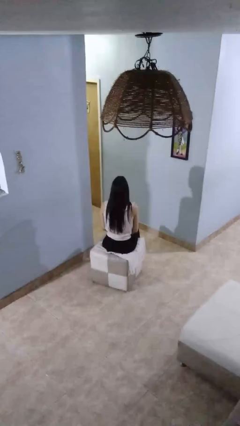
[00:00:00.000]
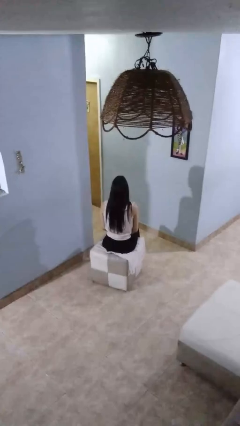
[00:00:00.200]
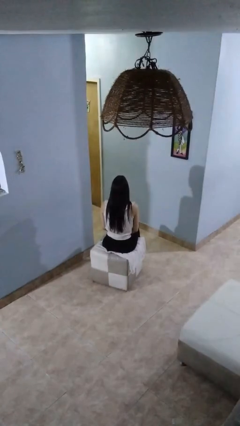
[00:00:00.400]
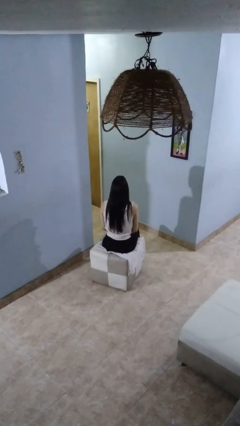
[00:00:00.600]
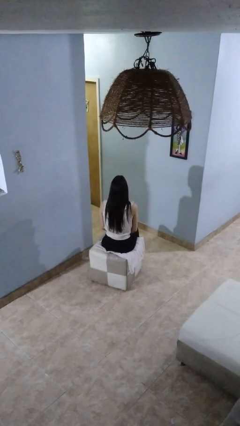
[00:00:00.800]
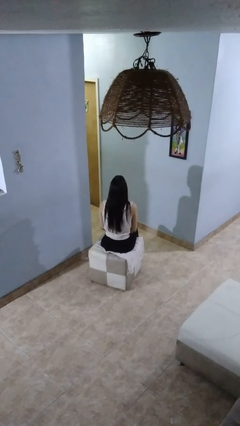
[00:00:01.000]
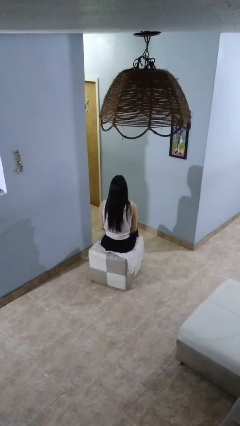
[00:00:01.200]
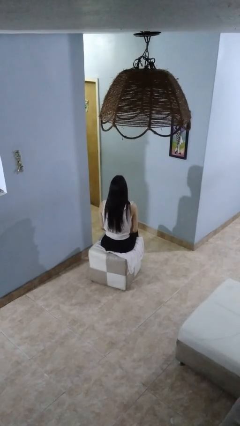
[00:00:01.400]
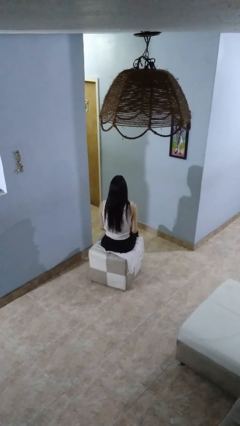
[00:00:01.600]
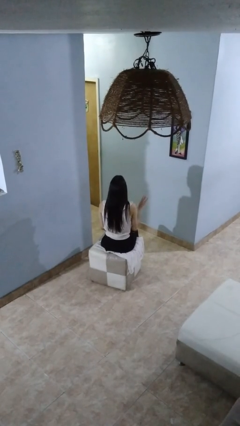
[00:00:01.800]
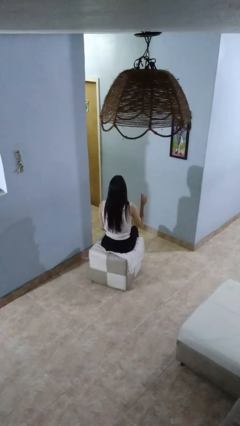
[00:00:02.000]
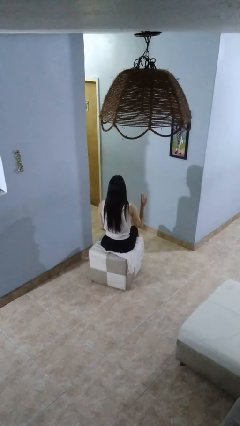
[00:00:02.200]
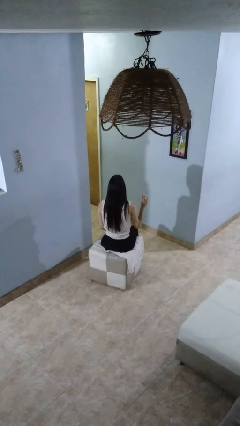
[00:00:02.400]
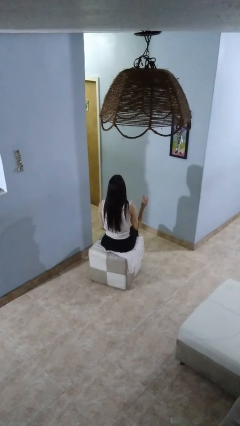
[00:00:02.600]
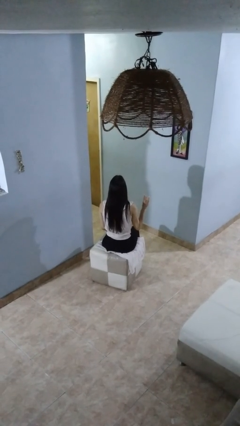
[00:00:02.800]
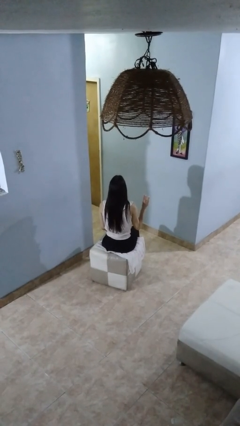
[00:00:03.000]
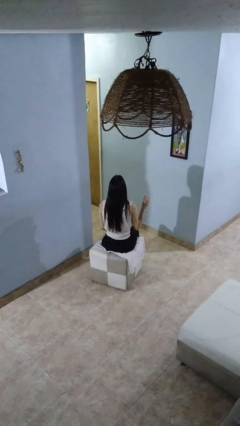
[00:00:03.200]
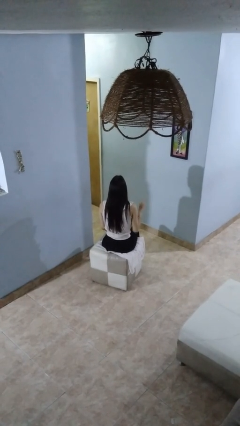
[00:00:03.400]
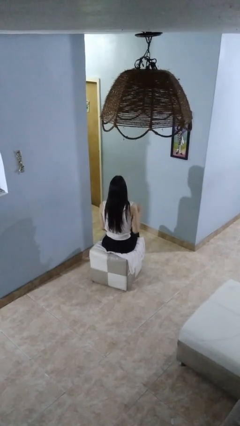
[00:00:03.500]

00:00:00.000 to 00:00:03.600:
person gestures number three

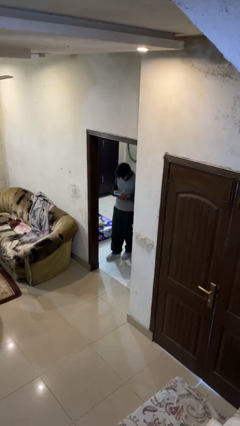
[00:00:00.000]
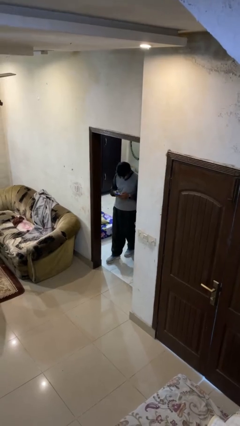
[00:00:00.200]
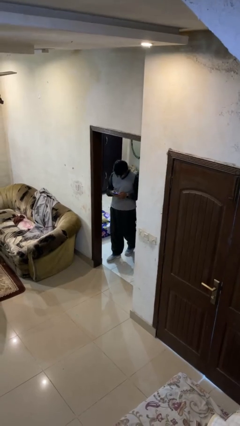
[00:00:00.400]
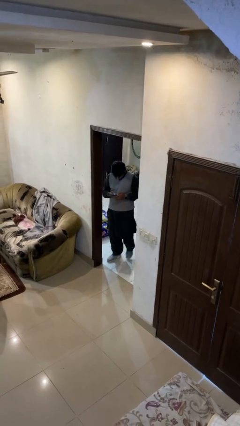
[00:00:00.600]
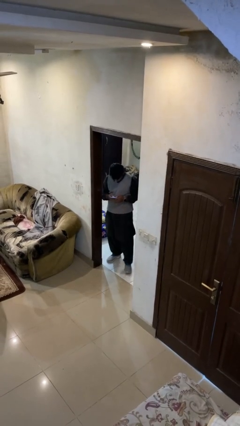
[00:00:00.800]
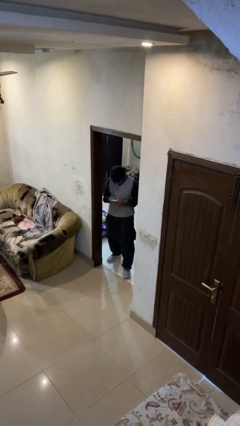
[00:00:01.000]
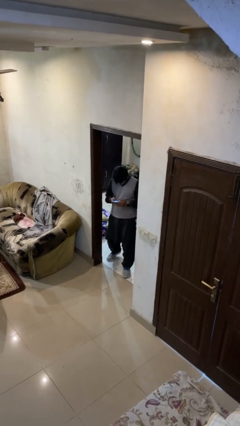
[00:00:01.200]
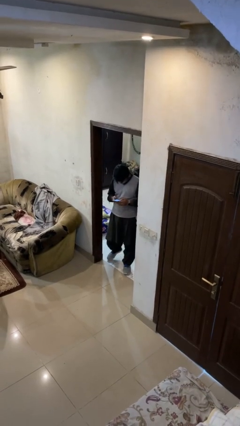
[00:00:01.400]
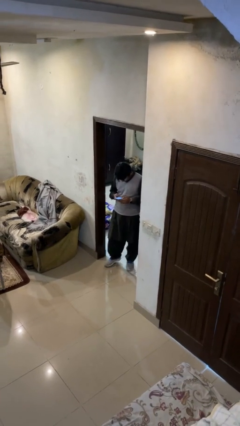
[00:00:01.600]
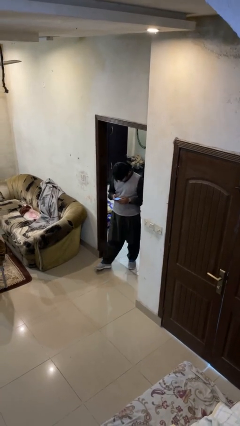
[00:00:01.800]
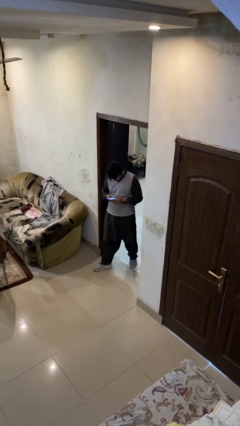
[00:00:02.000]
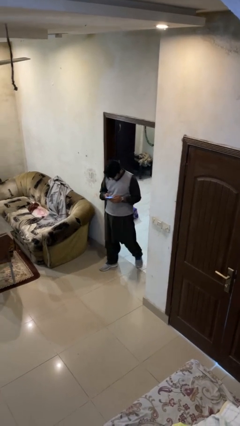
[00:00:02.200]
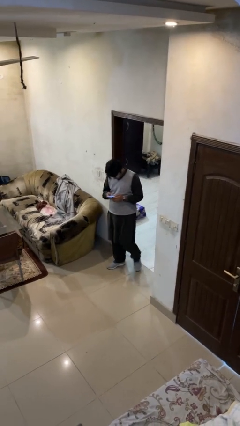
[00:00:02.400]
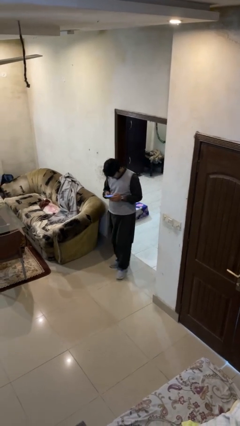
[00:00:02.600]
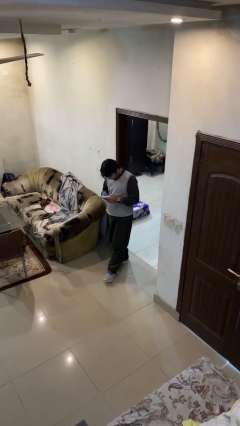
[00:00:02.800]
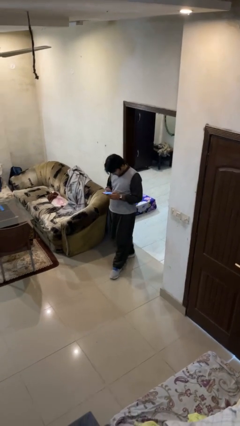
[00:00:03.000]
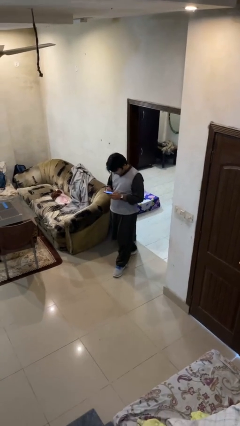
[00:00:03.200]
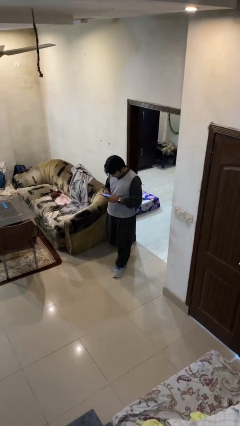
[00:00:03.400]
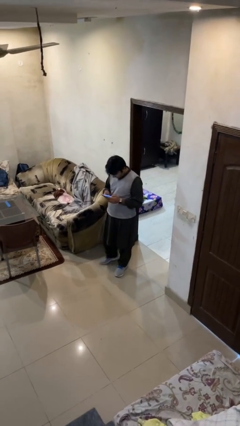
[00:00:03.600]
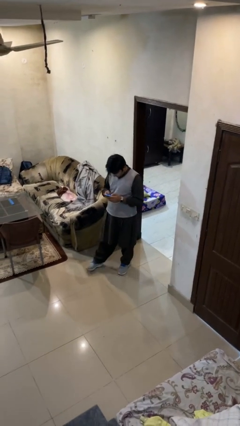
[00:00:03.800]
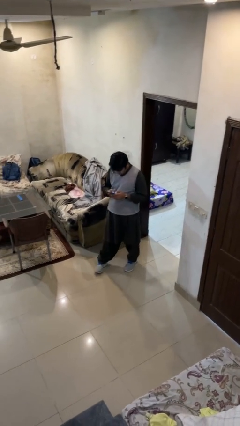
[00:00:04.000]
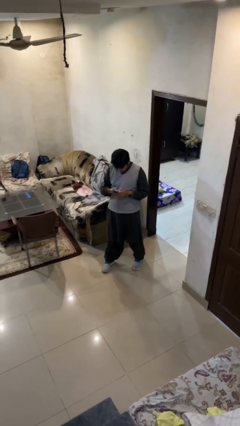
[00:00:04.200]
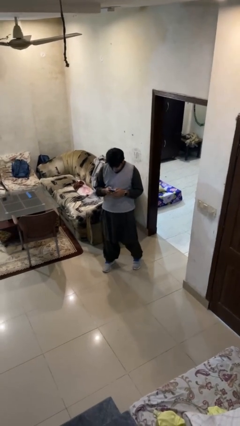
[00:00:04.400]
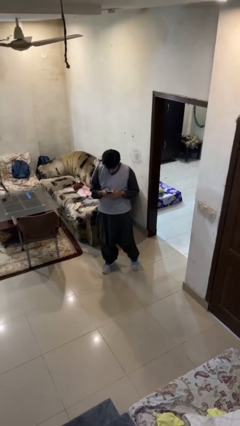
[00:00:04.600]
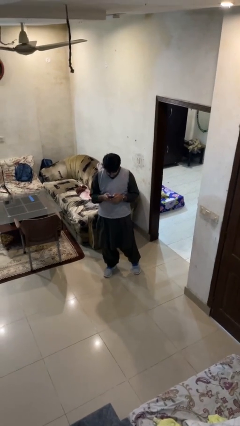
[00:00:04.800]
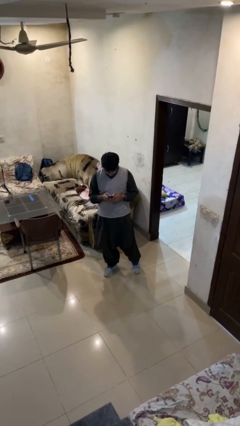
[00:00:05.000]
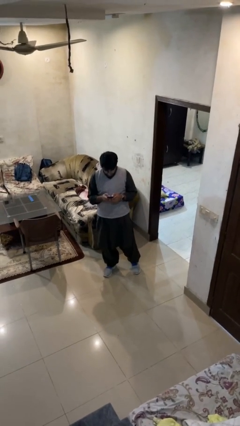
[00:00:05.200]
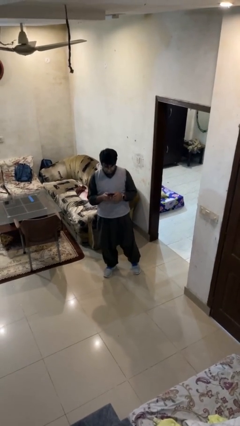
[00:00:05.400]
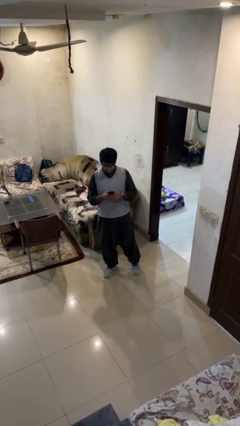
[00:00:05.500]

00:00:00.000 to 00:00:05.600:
person enters scene through structure

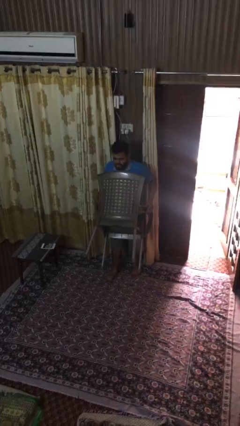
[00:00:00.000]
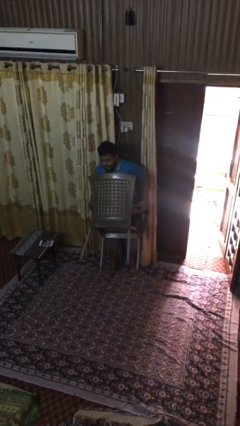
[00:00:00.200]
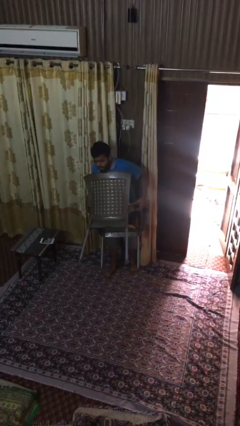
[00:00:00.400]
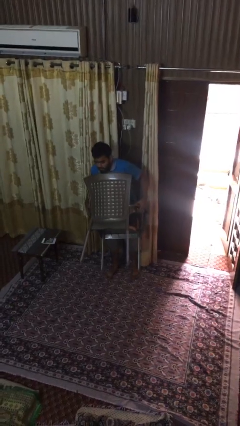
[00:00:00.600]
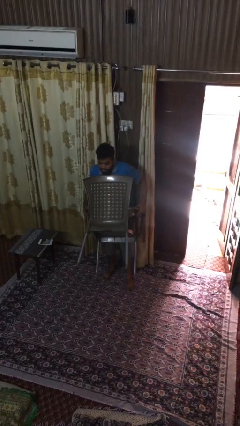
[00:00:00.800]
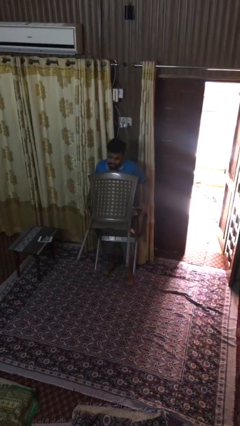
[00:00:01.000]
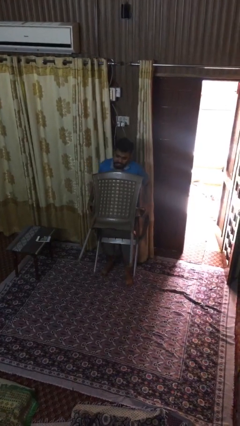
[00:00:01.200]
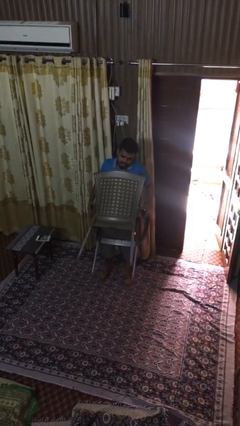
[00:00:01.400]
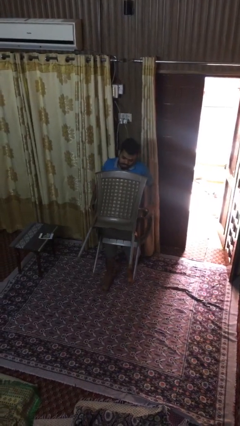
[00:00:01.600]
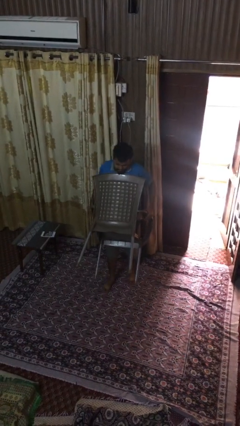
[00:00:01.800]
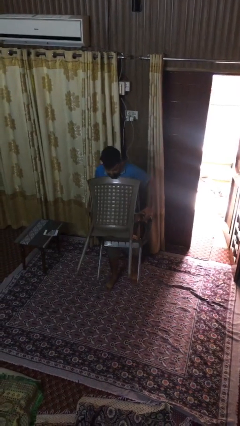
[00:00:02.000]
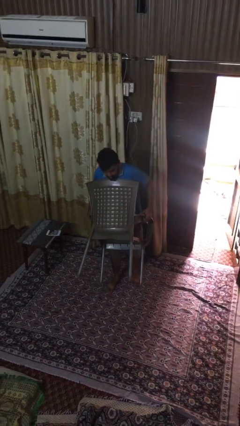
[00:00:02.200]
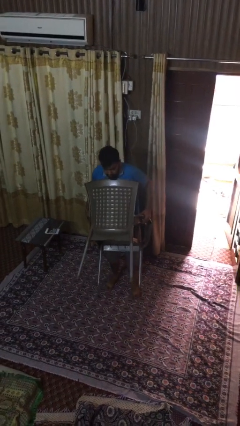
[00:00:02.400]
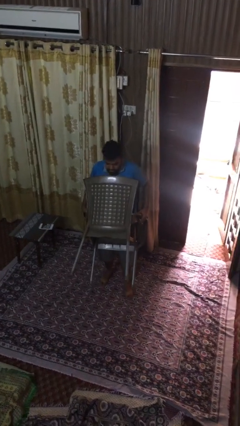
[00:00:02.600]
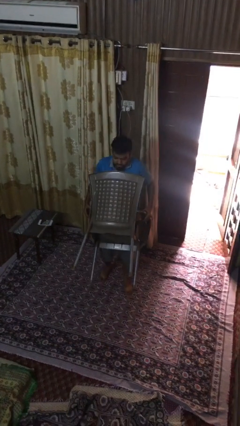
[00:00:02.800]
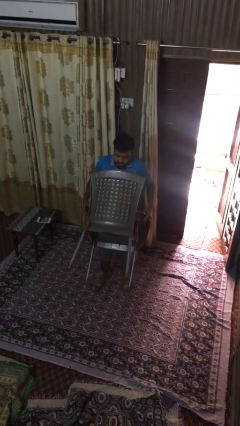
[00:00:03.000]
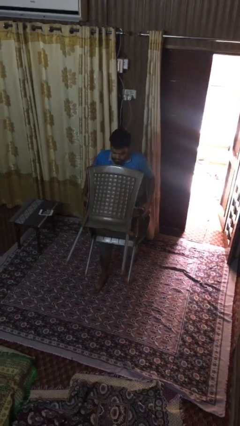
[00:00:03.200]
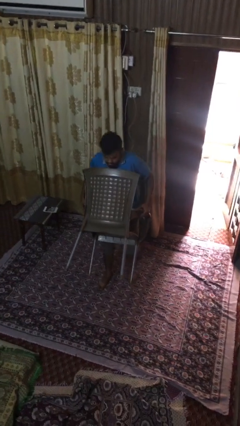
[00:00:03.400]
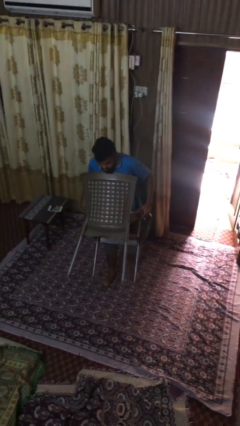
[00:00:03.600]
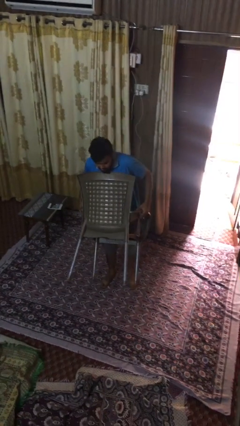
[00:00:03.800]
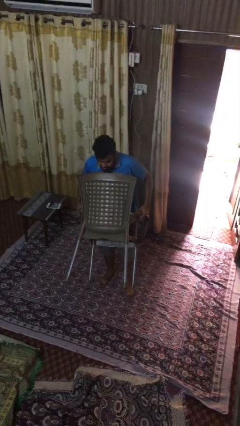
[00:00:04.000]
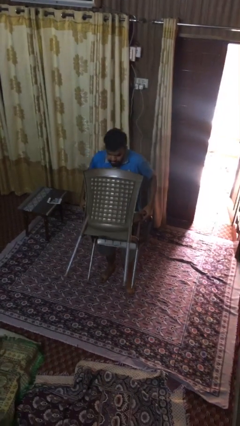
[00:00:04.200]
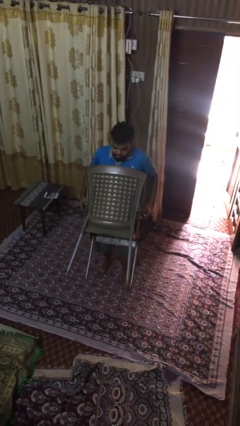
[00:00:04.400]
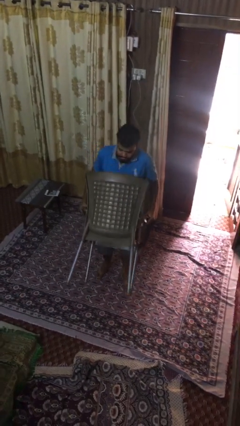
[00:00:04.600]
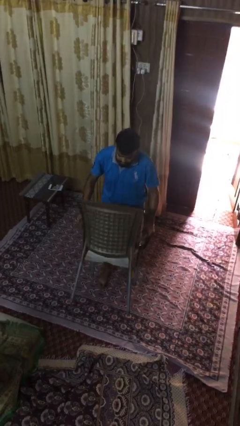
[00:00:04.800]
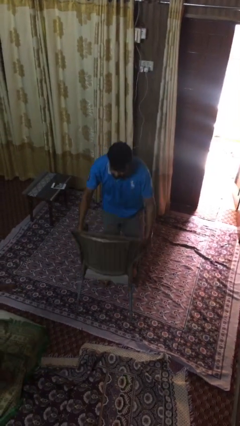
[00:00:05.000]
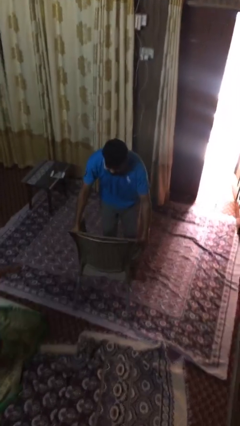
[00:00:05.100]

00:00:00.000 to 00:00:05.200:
person carries heavy object

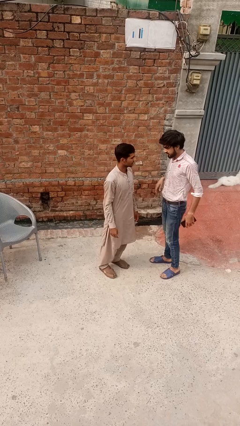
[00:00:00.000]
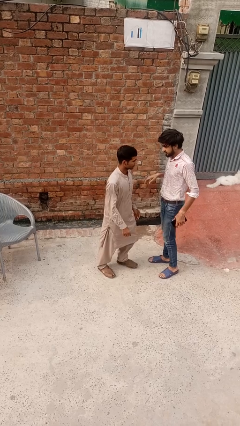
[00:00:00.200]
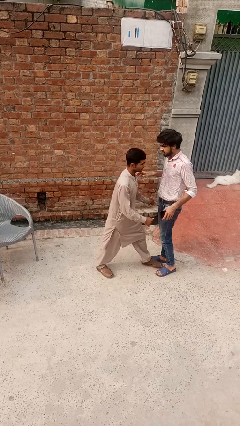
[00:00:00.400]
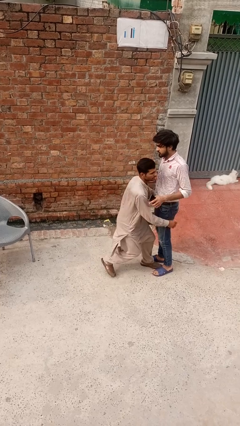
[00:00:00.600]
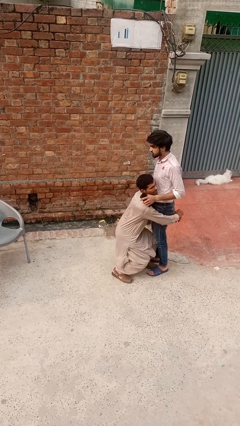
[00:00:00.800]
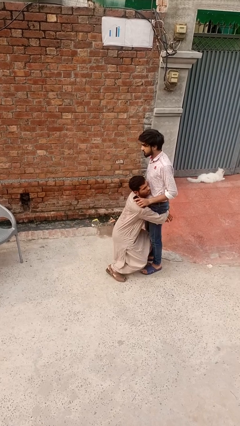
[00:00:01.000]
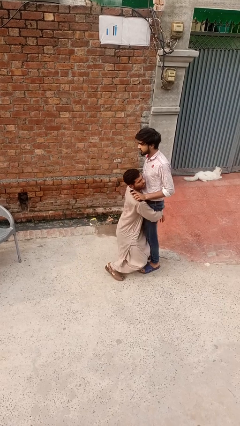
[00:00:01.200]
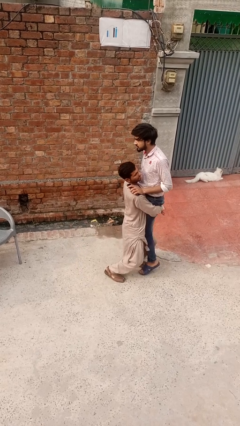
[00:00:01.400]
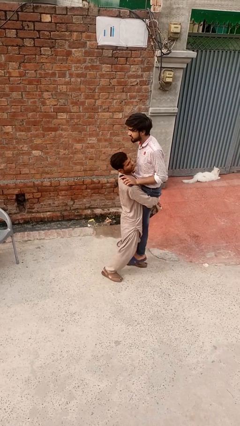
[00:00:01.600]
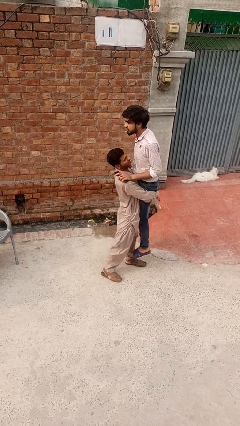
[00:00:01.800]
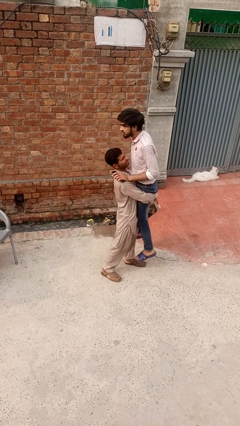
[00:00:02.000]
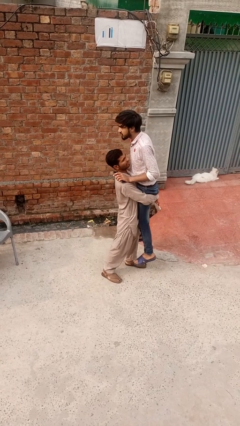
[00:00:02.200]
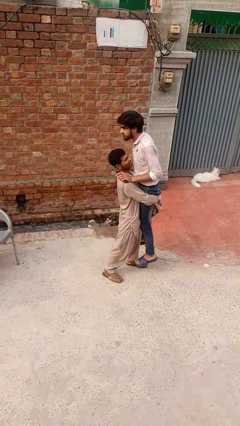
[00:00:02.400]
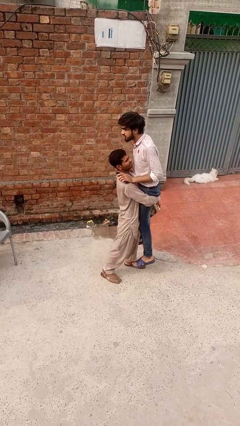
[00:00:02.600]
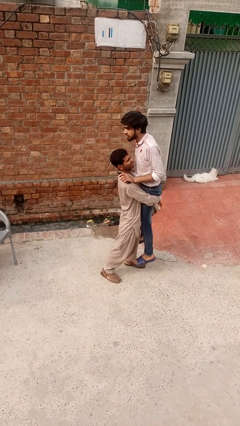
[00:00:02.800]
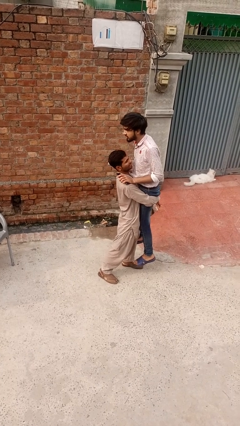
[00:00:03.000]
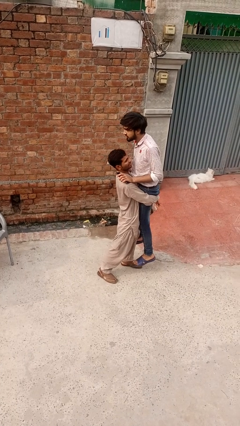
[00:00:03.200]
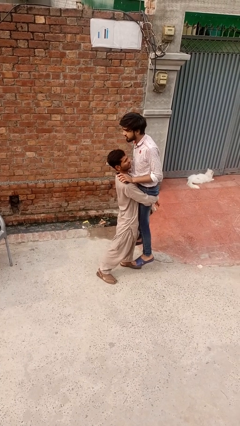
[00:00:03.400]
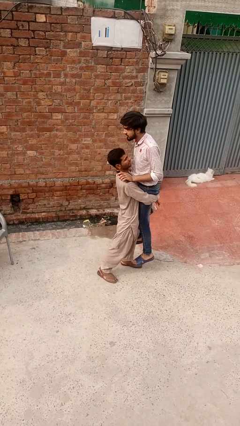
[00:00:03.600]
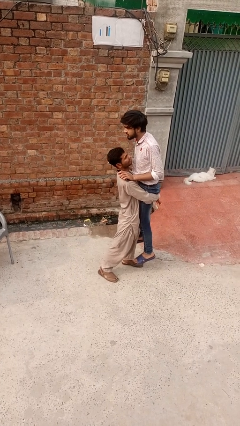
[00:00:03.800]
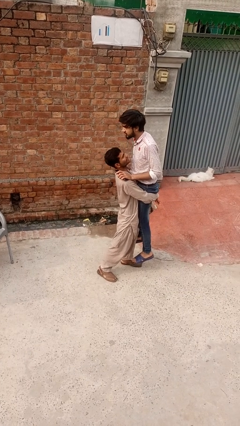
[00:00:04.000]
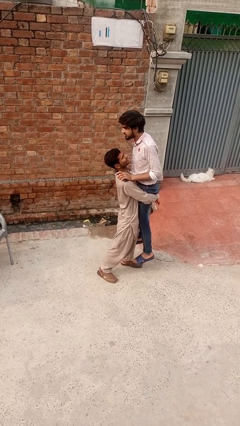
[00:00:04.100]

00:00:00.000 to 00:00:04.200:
person picks up person
